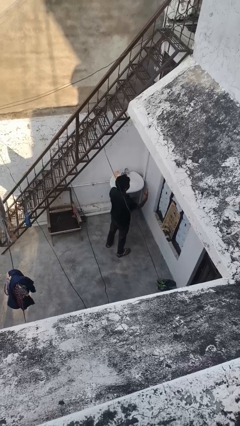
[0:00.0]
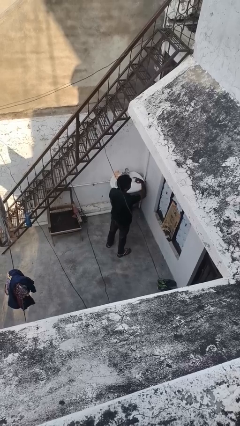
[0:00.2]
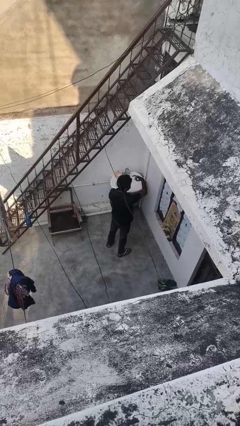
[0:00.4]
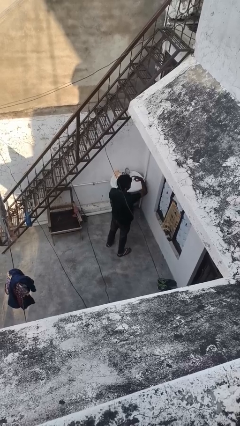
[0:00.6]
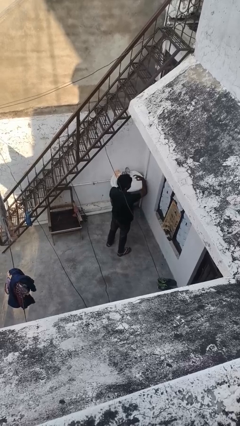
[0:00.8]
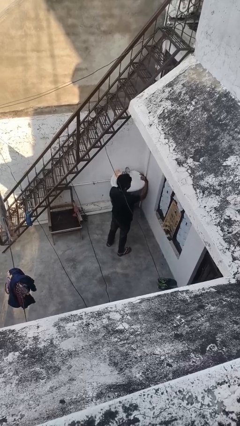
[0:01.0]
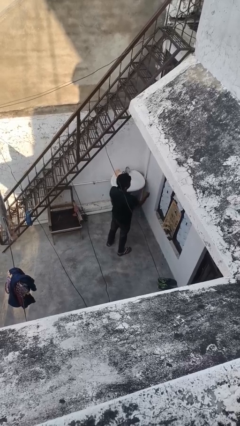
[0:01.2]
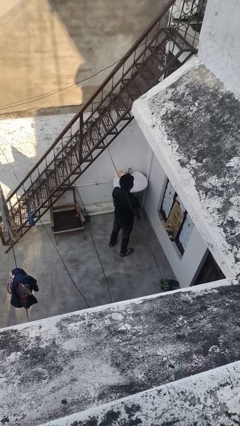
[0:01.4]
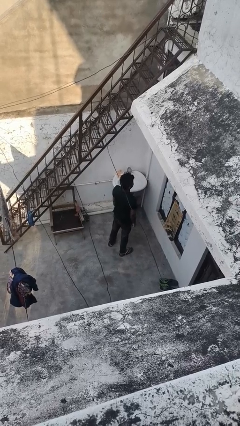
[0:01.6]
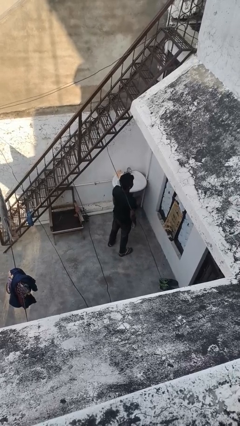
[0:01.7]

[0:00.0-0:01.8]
person gestures watch closely

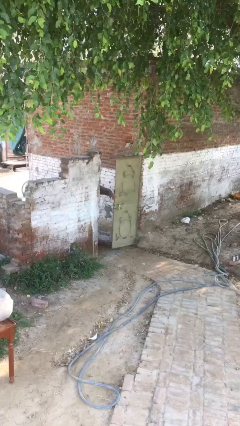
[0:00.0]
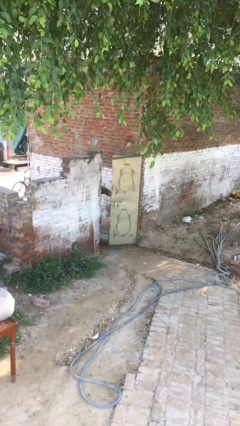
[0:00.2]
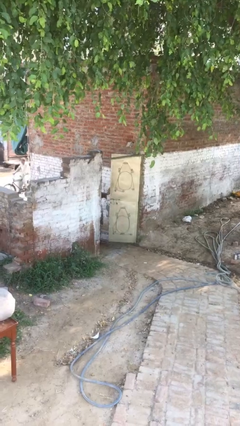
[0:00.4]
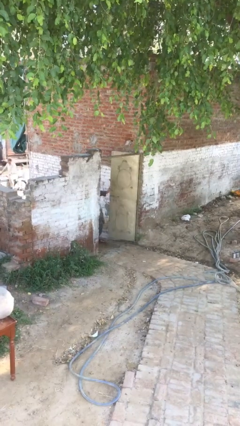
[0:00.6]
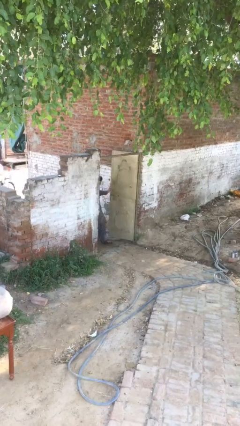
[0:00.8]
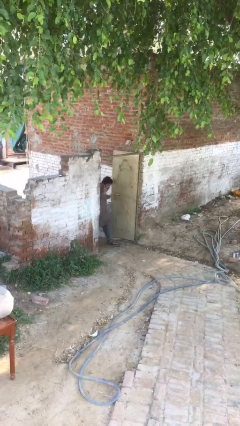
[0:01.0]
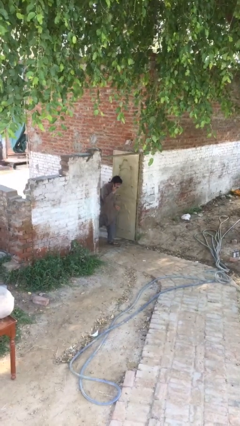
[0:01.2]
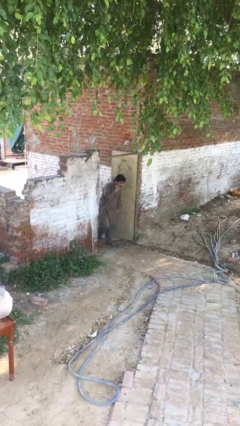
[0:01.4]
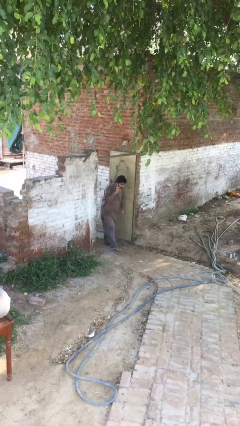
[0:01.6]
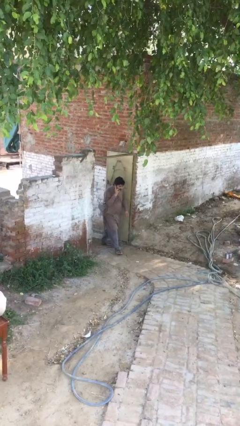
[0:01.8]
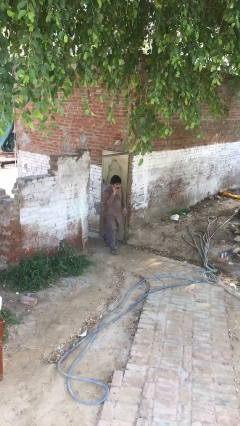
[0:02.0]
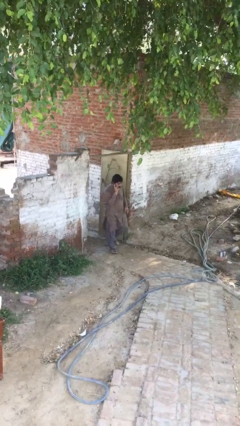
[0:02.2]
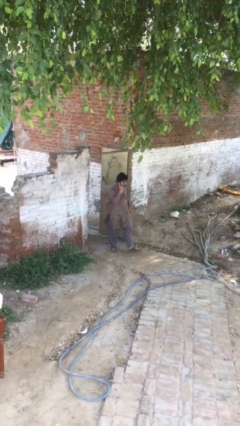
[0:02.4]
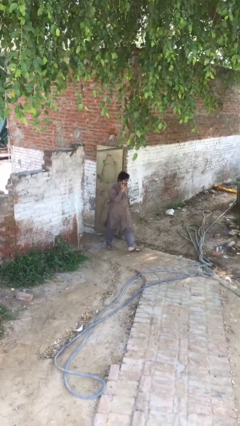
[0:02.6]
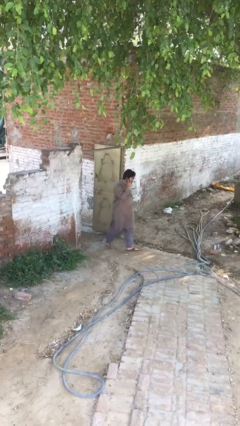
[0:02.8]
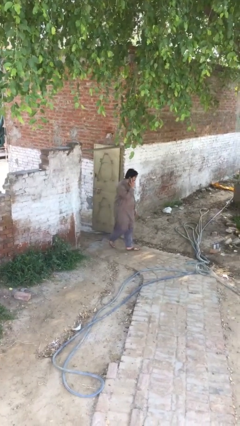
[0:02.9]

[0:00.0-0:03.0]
person enters scene through structure

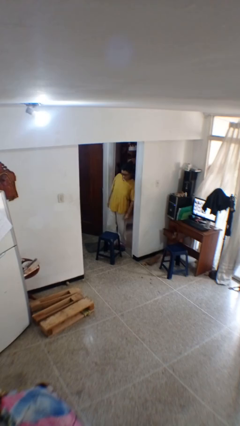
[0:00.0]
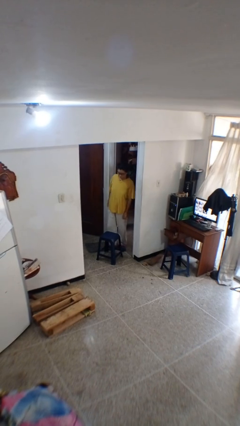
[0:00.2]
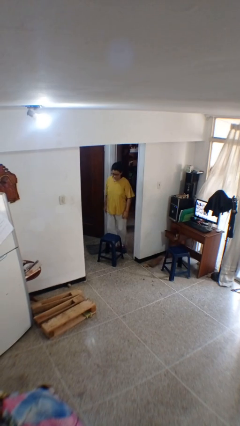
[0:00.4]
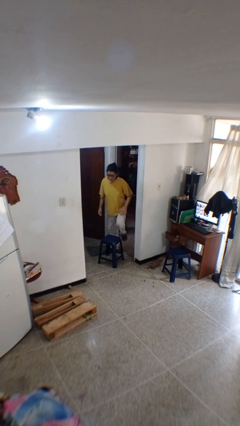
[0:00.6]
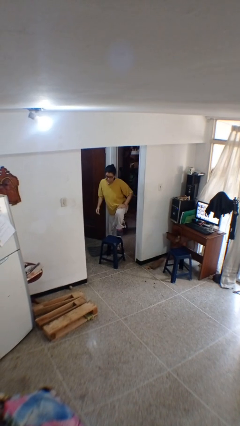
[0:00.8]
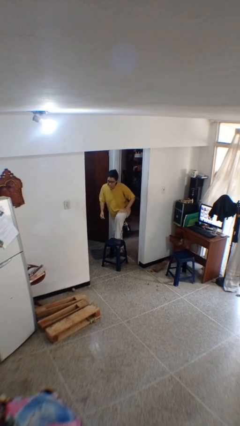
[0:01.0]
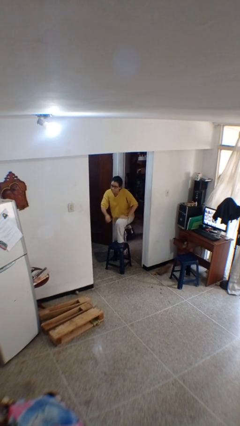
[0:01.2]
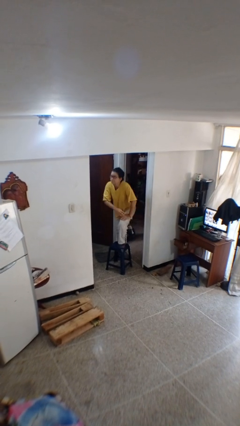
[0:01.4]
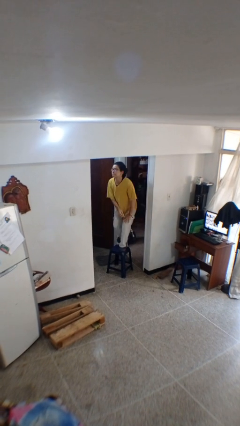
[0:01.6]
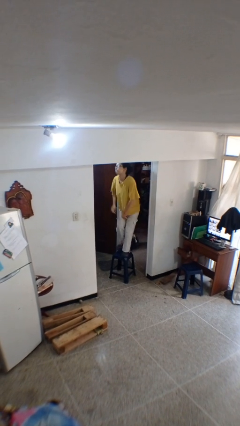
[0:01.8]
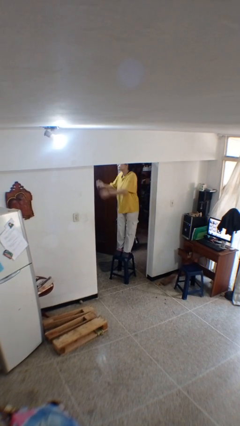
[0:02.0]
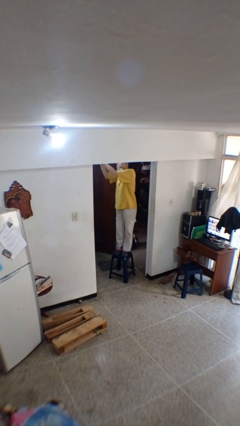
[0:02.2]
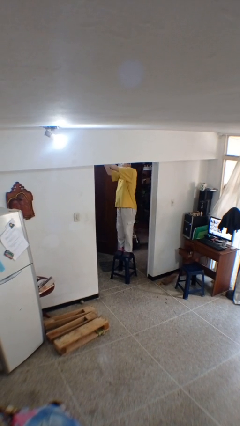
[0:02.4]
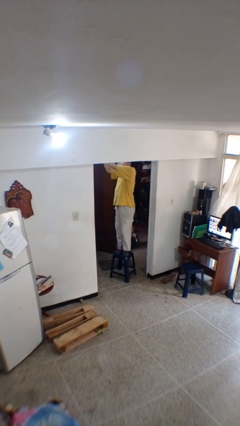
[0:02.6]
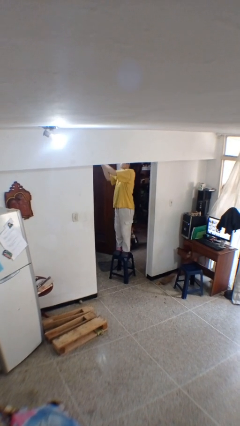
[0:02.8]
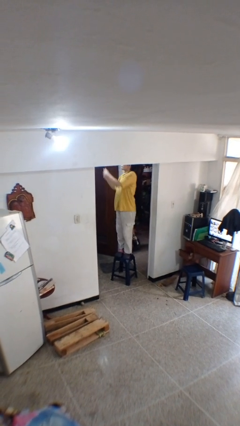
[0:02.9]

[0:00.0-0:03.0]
person climbs on chair

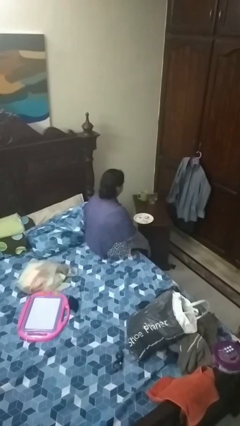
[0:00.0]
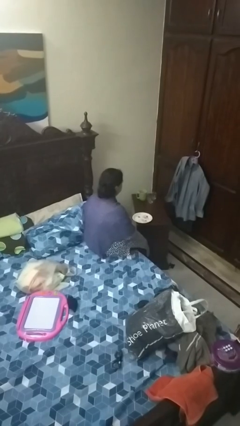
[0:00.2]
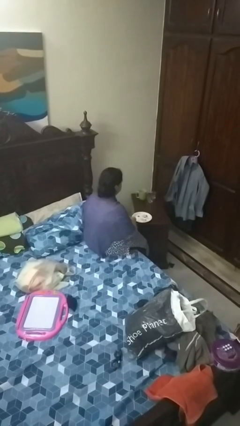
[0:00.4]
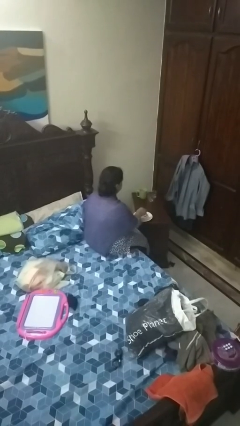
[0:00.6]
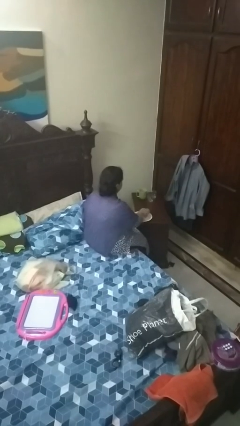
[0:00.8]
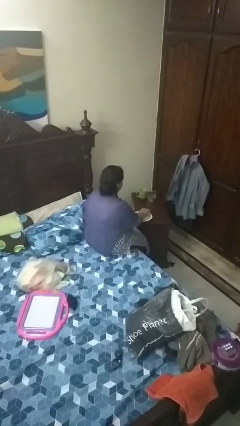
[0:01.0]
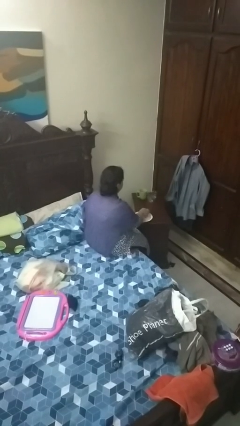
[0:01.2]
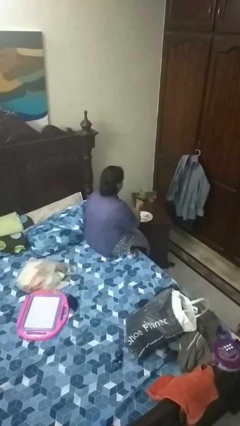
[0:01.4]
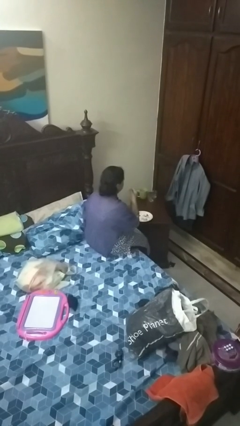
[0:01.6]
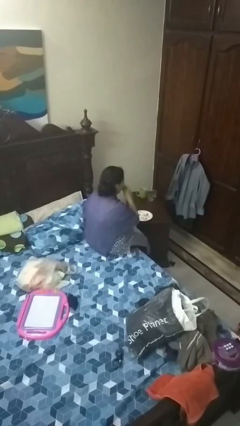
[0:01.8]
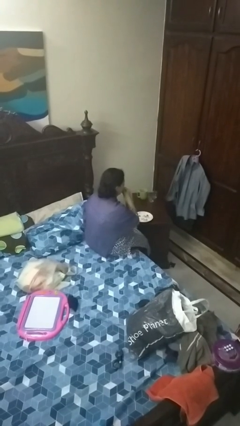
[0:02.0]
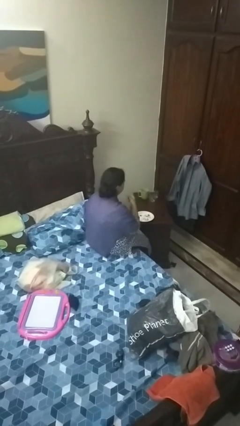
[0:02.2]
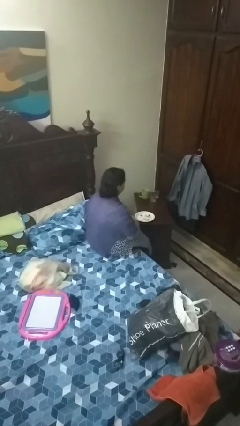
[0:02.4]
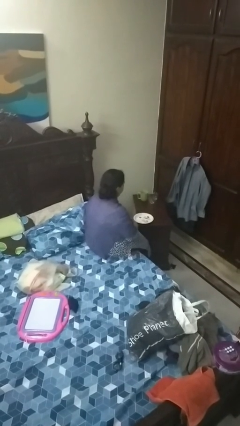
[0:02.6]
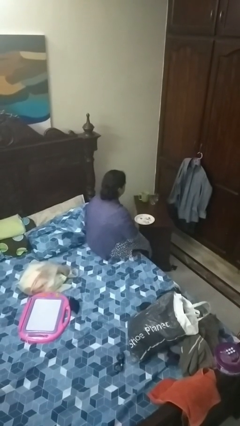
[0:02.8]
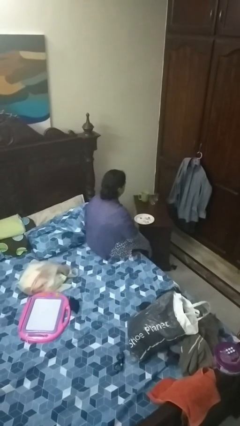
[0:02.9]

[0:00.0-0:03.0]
person eats with hands

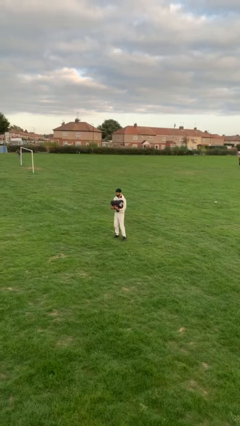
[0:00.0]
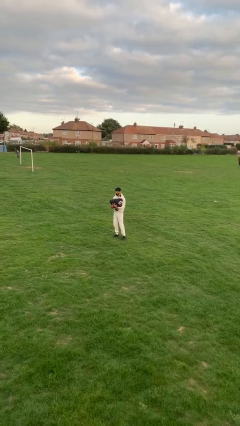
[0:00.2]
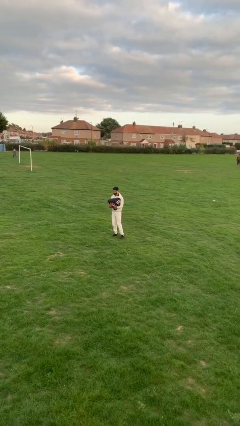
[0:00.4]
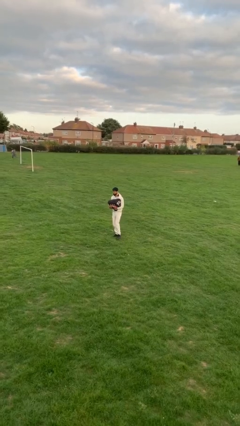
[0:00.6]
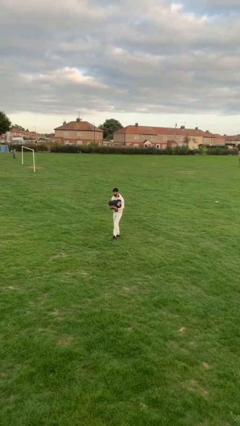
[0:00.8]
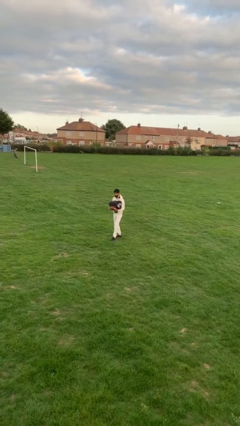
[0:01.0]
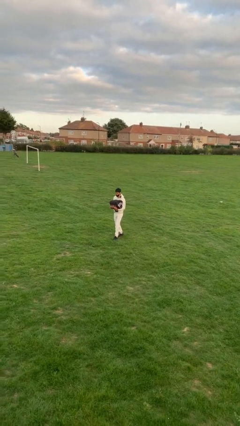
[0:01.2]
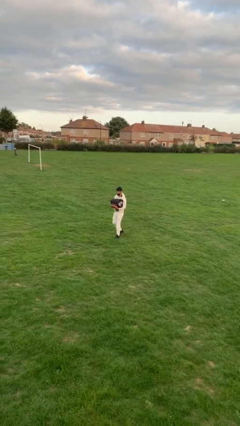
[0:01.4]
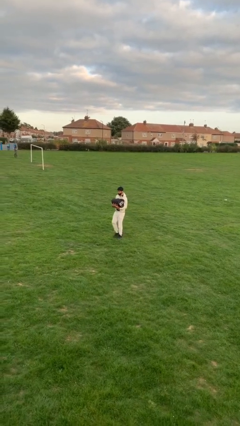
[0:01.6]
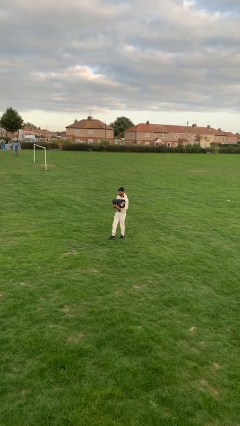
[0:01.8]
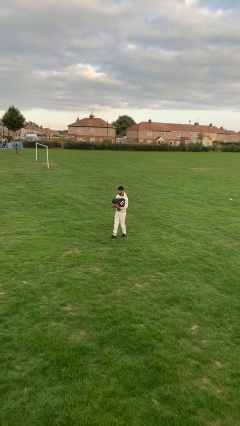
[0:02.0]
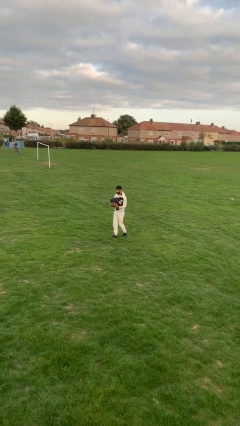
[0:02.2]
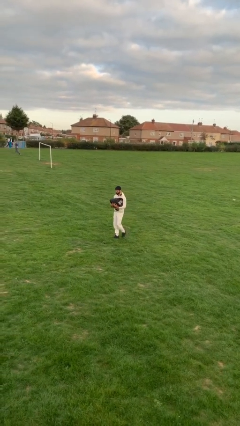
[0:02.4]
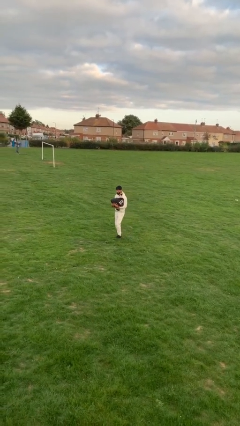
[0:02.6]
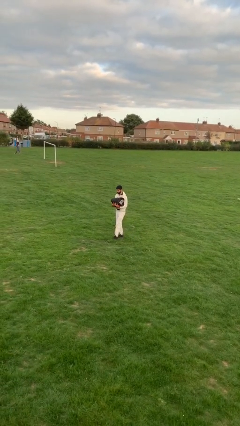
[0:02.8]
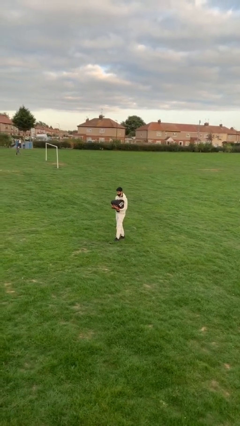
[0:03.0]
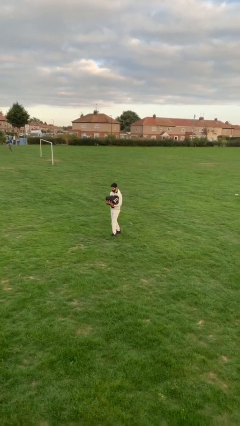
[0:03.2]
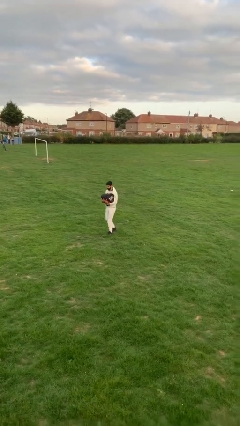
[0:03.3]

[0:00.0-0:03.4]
person carries heavy object

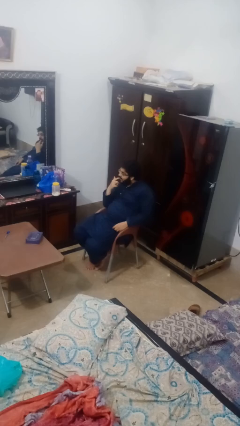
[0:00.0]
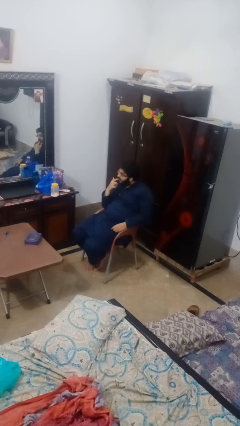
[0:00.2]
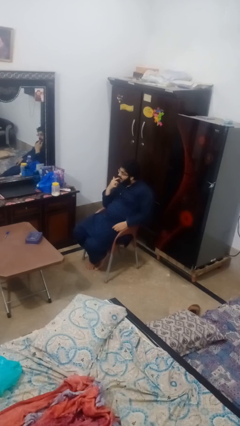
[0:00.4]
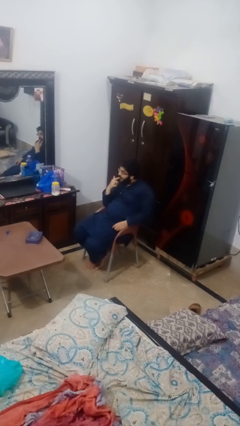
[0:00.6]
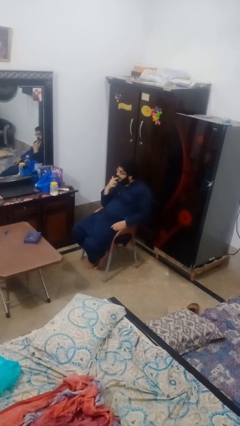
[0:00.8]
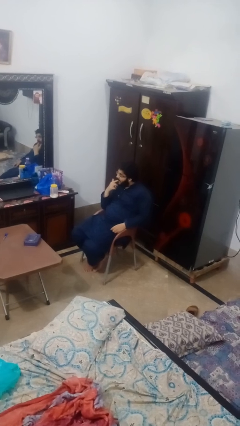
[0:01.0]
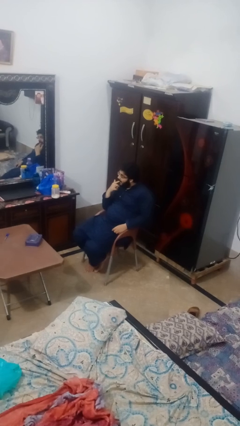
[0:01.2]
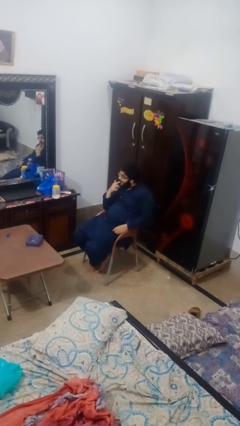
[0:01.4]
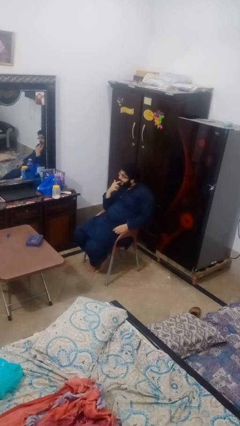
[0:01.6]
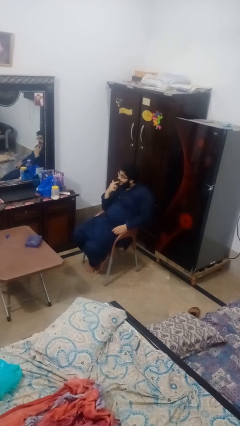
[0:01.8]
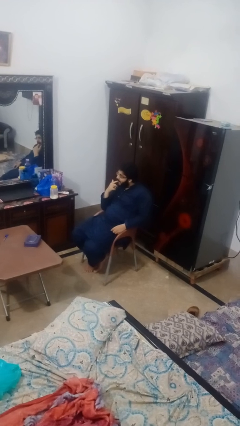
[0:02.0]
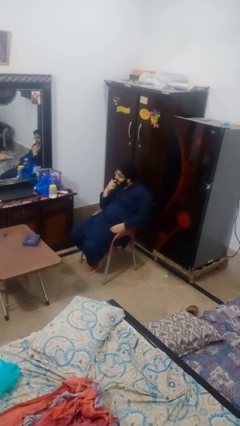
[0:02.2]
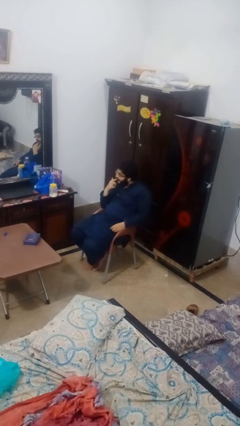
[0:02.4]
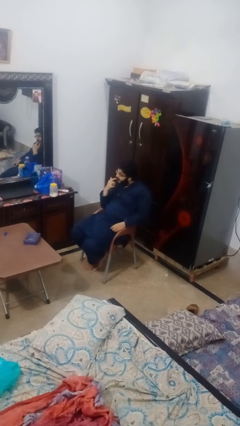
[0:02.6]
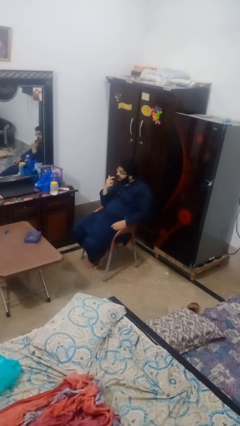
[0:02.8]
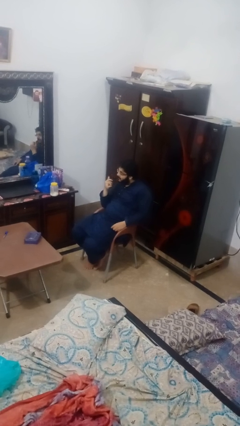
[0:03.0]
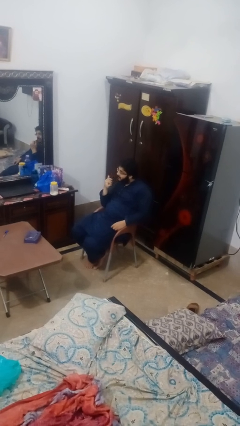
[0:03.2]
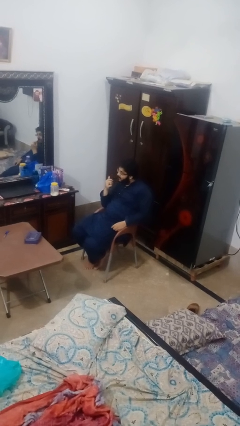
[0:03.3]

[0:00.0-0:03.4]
person licks fingers
